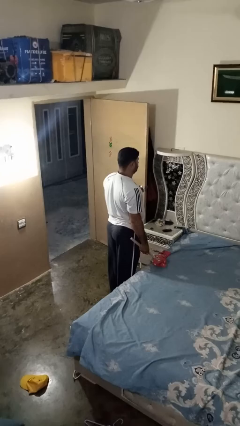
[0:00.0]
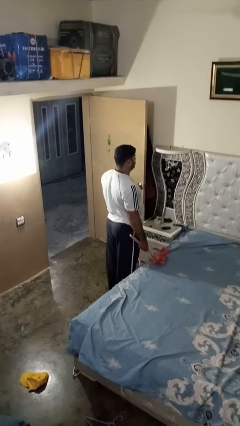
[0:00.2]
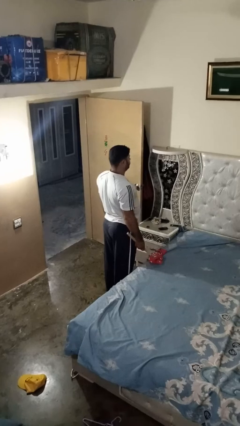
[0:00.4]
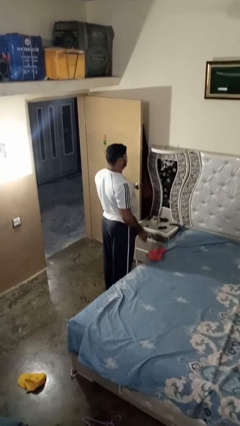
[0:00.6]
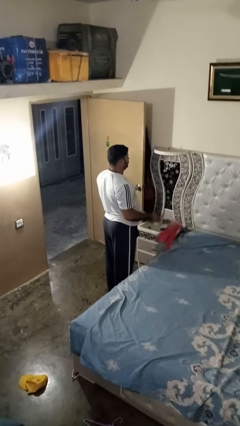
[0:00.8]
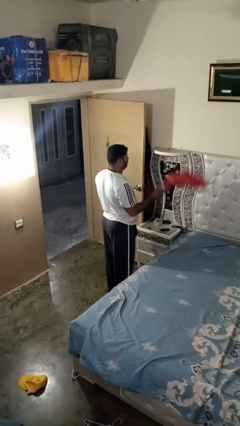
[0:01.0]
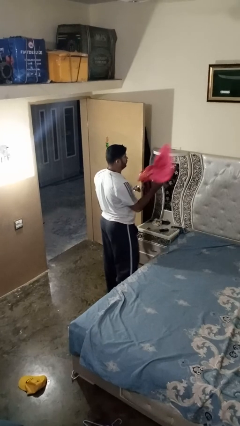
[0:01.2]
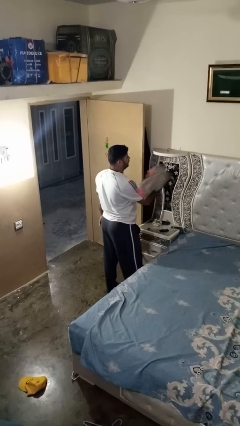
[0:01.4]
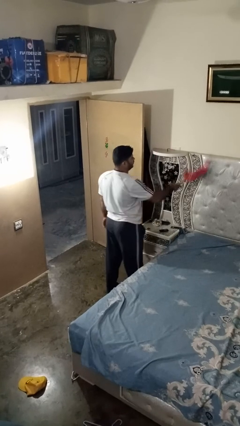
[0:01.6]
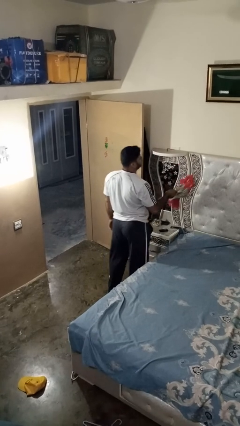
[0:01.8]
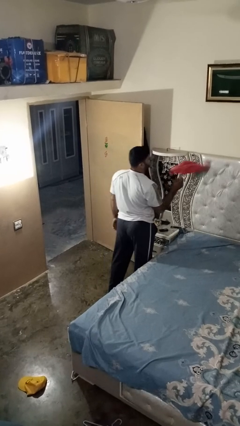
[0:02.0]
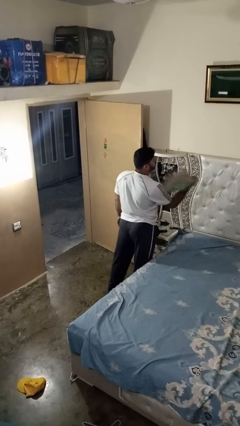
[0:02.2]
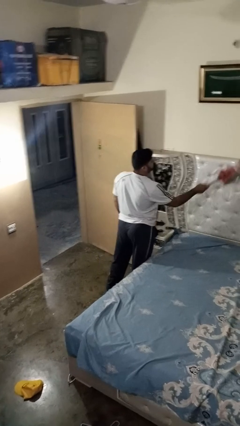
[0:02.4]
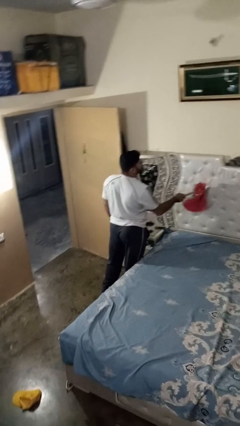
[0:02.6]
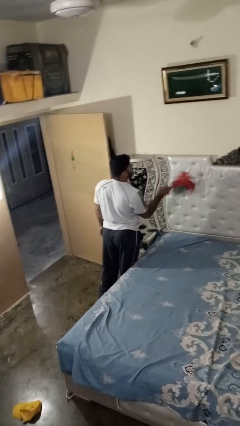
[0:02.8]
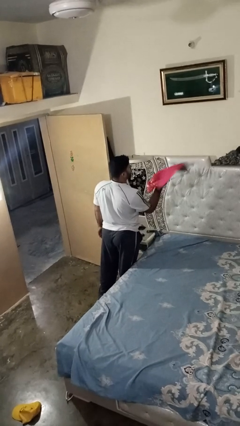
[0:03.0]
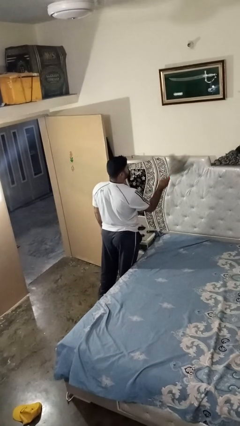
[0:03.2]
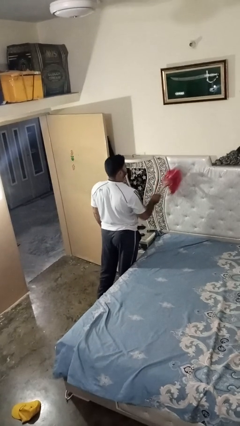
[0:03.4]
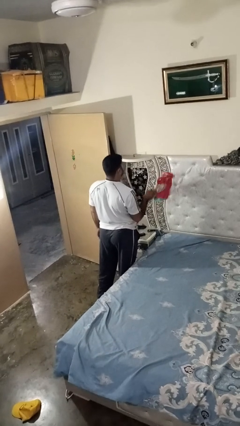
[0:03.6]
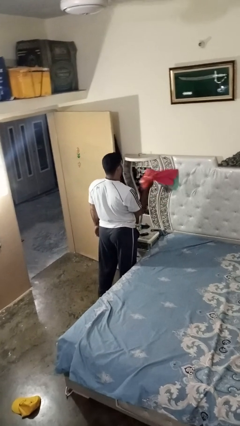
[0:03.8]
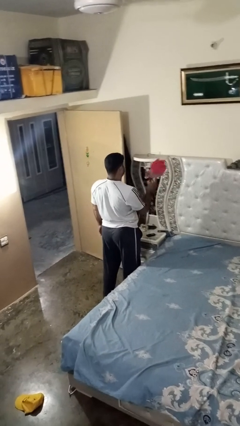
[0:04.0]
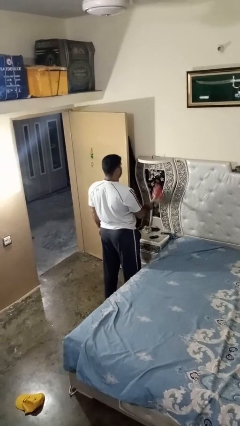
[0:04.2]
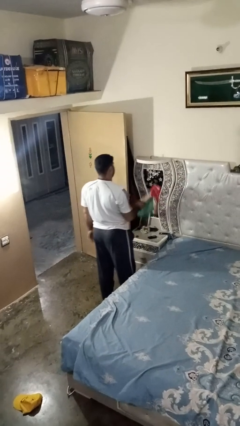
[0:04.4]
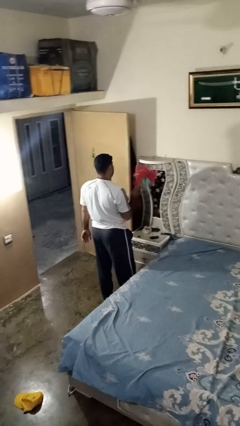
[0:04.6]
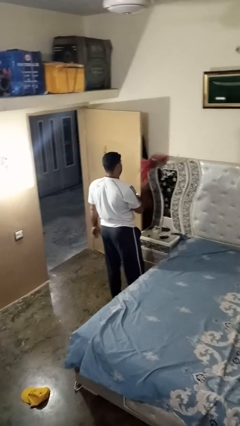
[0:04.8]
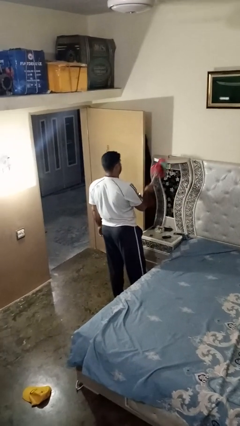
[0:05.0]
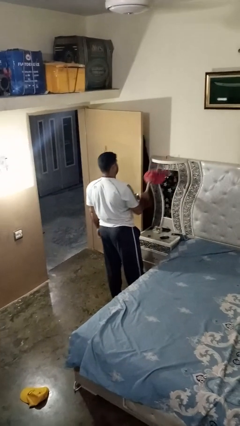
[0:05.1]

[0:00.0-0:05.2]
person dusts furniture

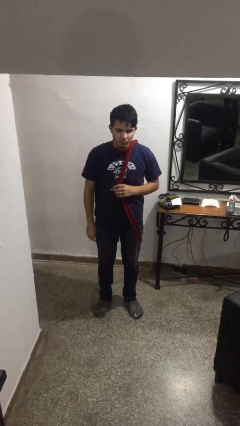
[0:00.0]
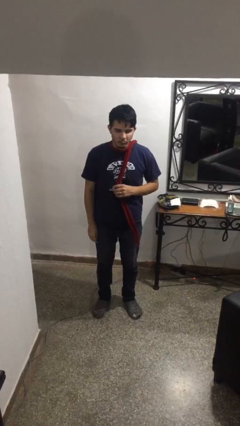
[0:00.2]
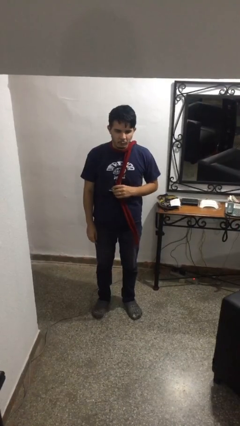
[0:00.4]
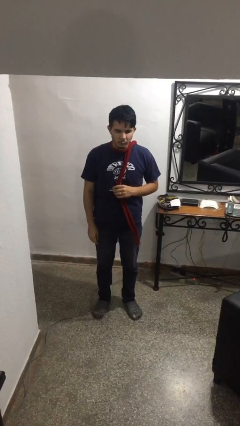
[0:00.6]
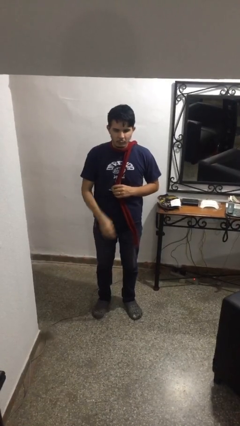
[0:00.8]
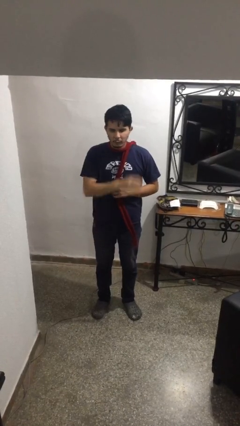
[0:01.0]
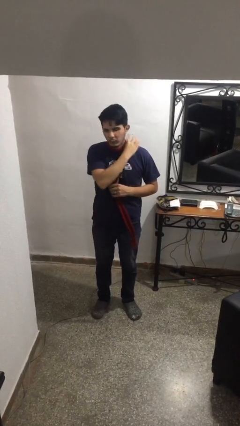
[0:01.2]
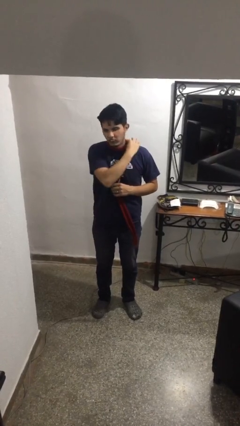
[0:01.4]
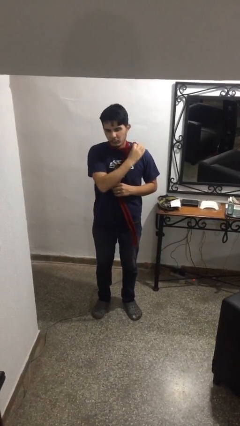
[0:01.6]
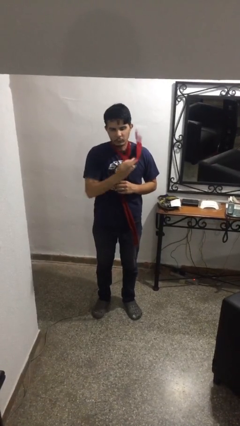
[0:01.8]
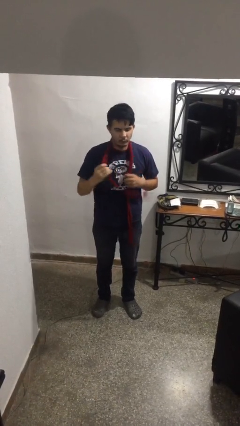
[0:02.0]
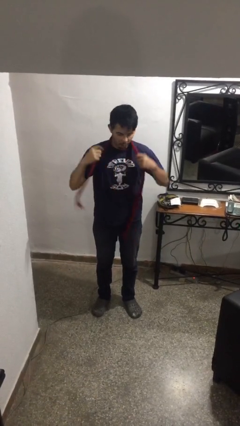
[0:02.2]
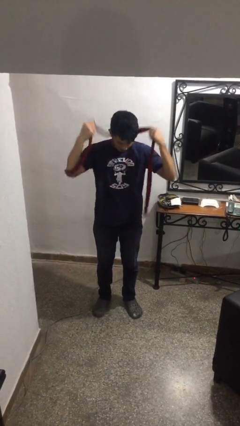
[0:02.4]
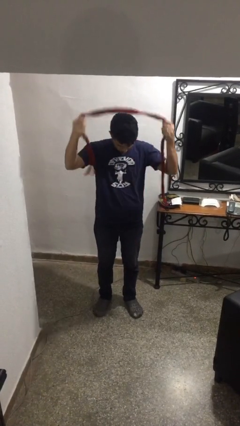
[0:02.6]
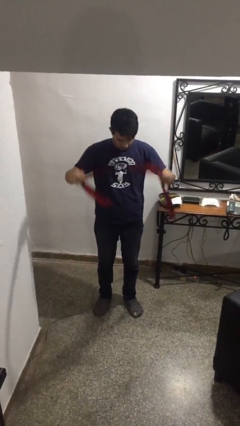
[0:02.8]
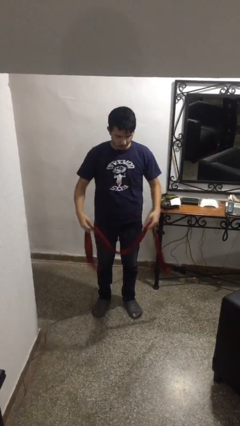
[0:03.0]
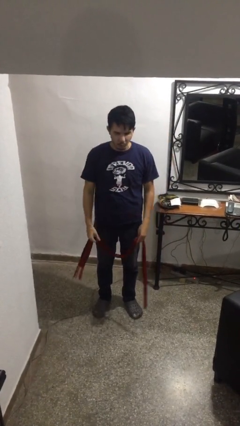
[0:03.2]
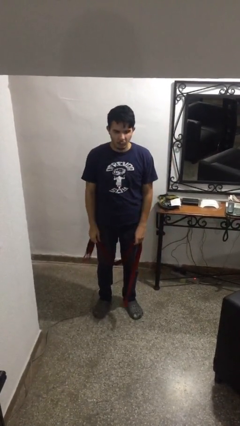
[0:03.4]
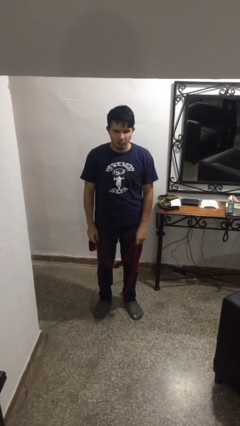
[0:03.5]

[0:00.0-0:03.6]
person takes off scarf

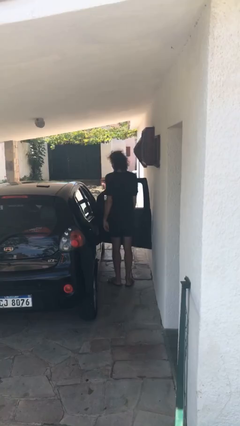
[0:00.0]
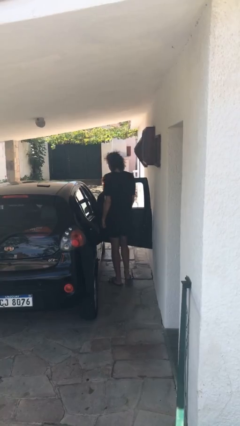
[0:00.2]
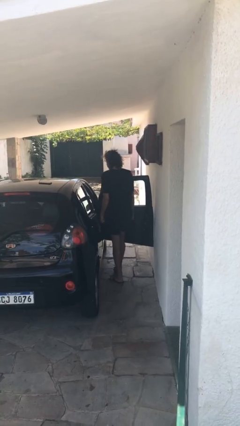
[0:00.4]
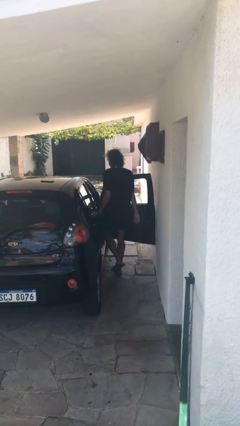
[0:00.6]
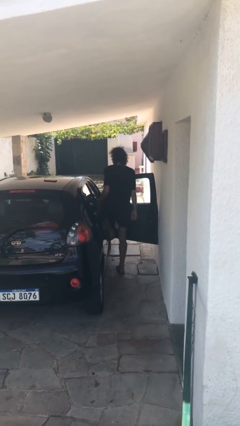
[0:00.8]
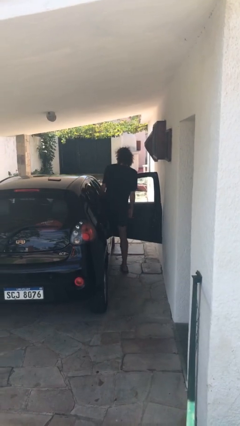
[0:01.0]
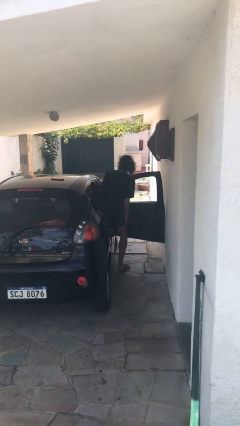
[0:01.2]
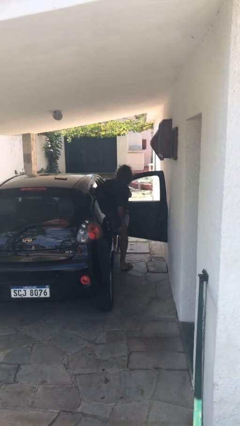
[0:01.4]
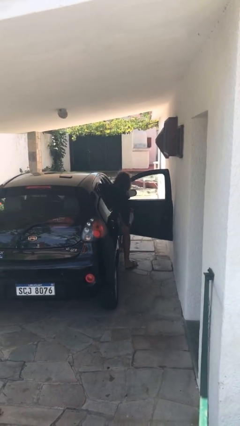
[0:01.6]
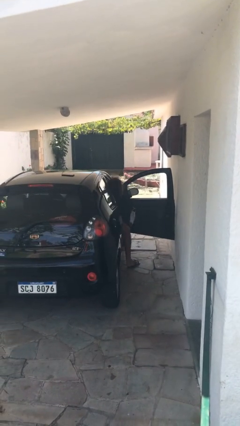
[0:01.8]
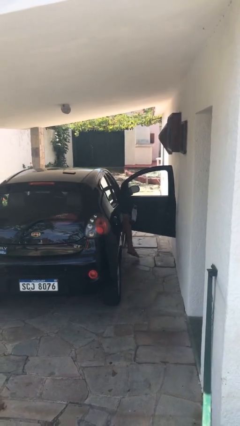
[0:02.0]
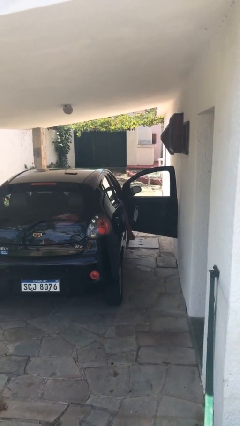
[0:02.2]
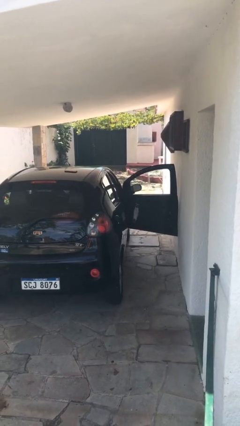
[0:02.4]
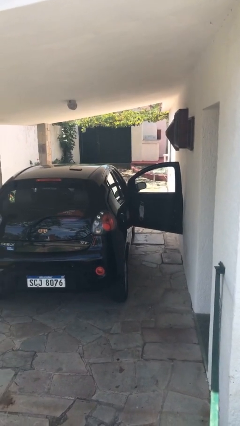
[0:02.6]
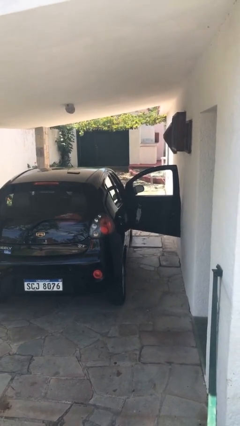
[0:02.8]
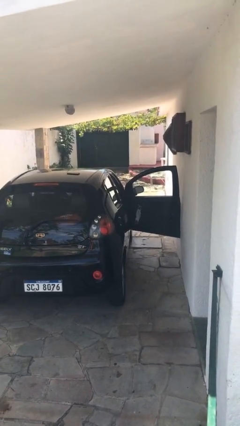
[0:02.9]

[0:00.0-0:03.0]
person enters car

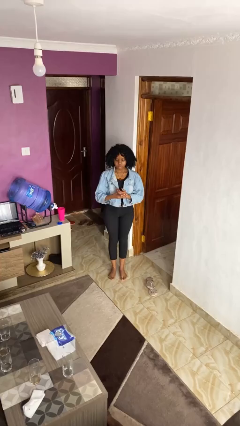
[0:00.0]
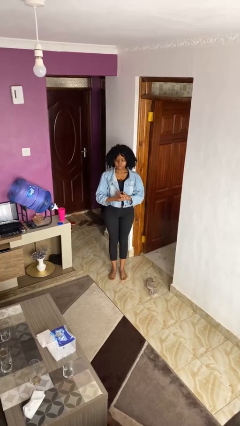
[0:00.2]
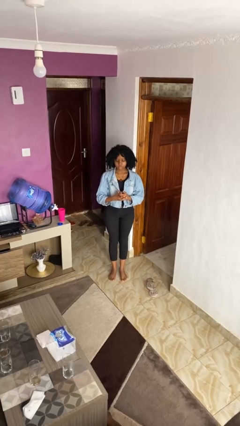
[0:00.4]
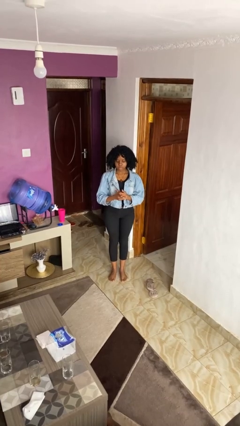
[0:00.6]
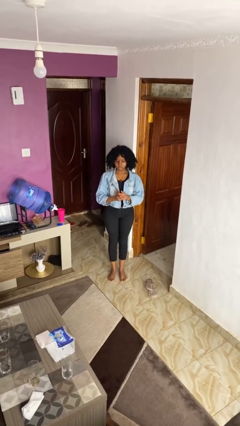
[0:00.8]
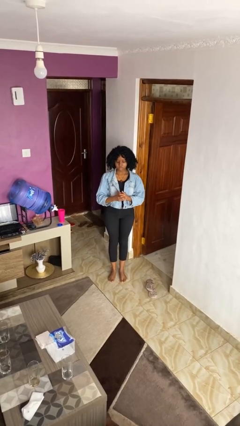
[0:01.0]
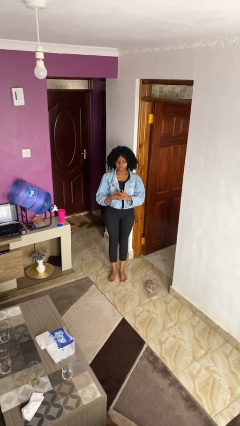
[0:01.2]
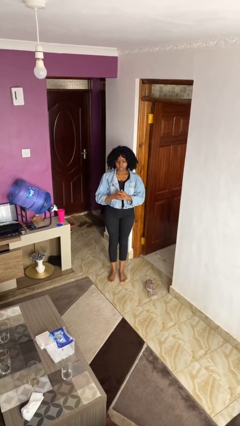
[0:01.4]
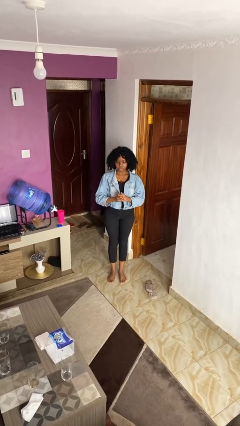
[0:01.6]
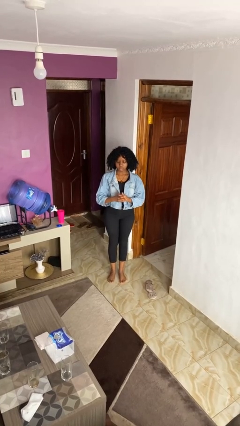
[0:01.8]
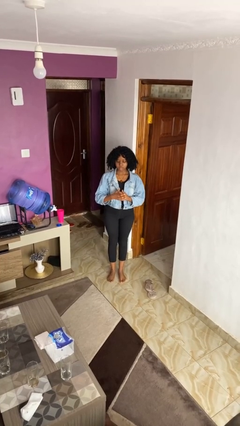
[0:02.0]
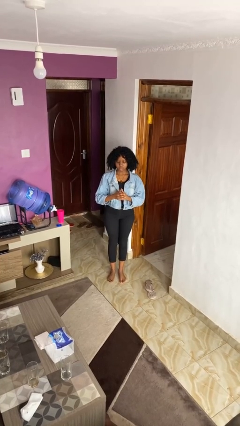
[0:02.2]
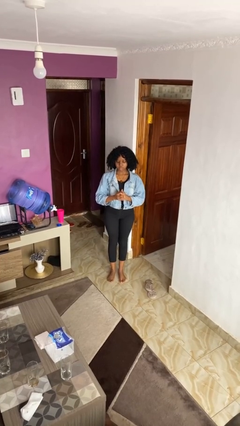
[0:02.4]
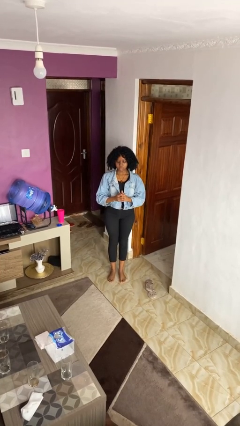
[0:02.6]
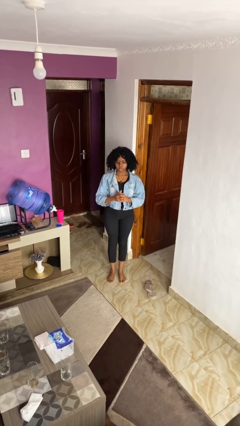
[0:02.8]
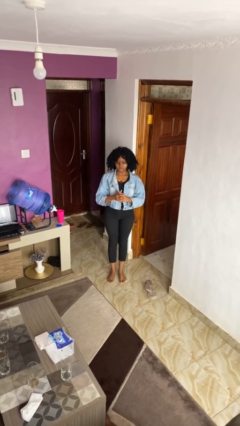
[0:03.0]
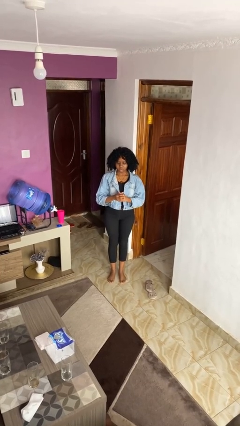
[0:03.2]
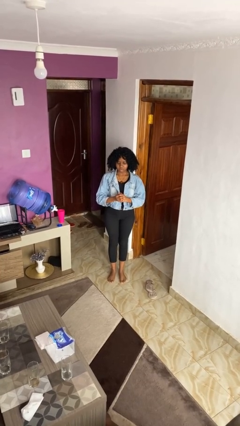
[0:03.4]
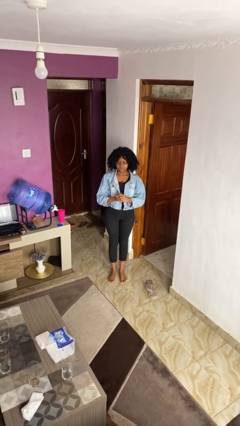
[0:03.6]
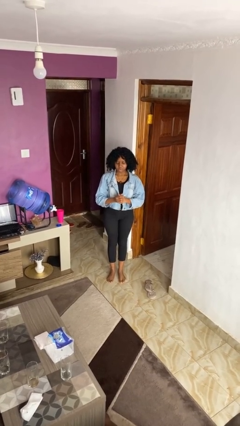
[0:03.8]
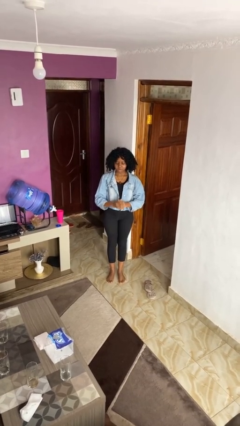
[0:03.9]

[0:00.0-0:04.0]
person cracks knuckles

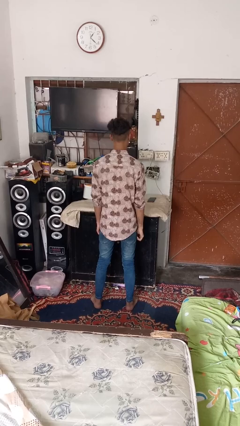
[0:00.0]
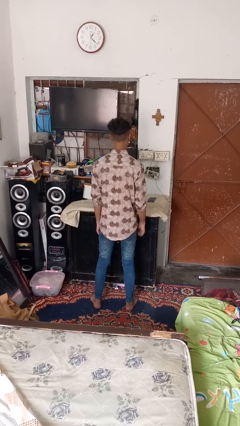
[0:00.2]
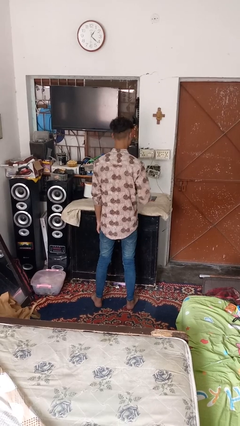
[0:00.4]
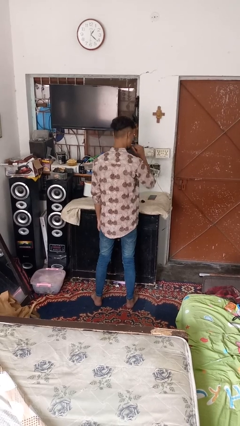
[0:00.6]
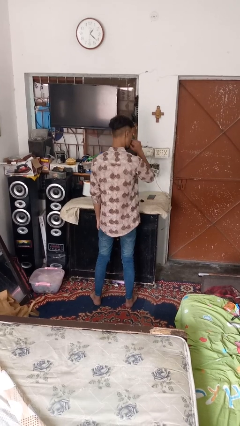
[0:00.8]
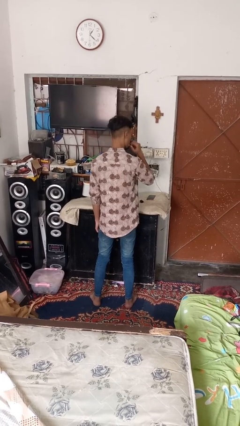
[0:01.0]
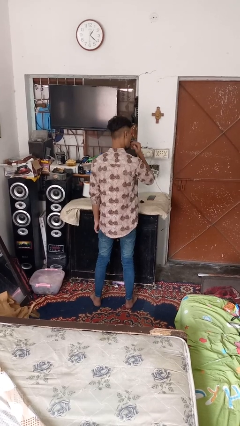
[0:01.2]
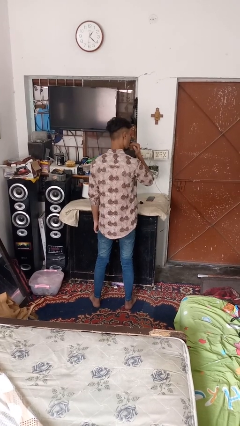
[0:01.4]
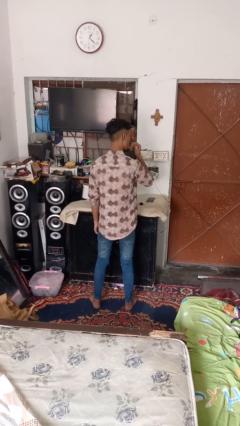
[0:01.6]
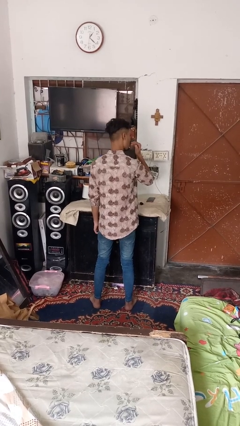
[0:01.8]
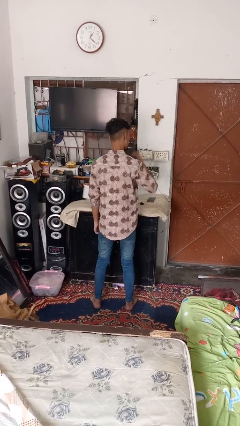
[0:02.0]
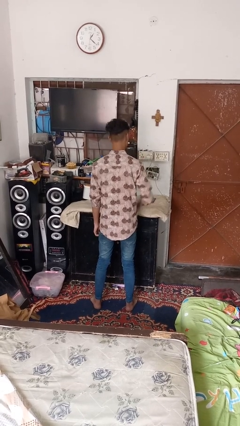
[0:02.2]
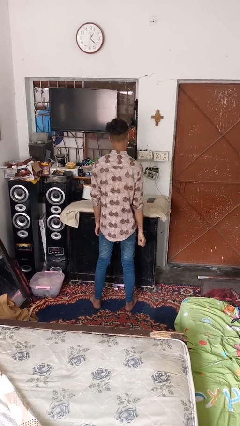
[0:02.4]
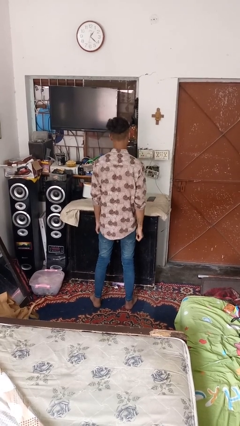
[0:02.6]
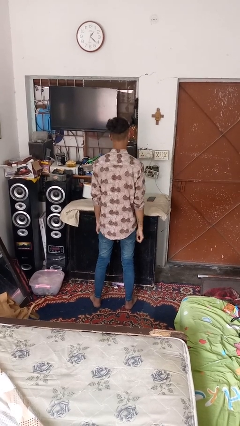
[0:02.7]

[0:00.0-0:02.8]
person licks fingers
